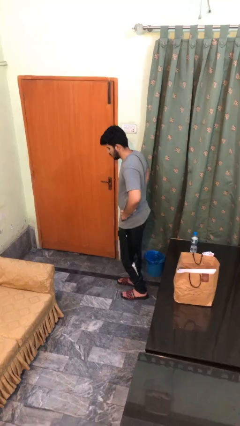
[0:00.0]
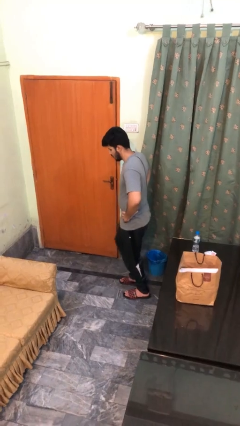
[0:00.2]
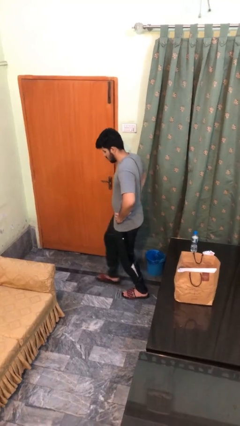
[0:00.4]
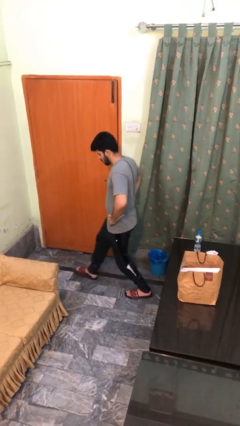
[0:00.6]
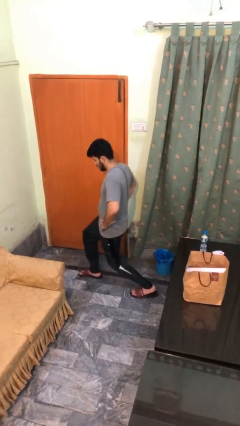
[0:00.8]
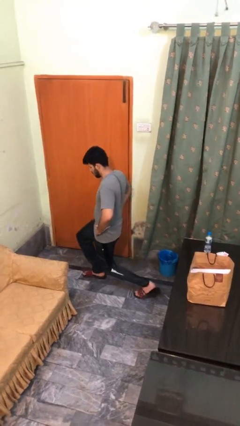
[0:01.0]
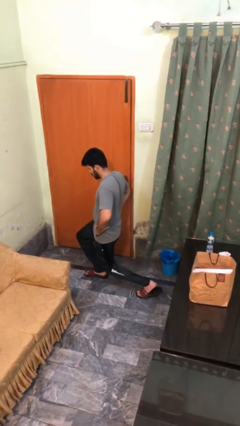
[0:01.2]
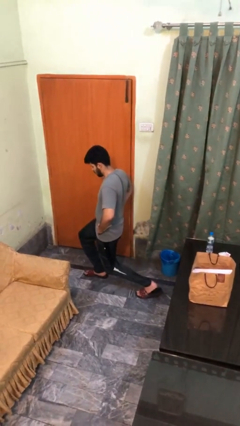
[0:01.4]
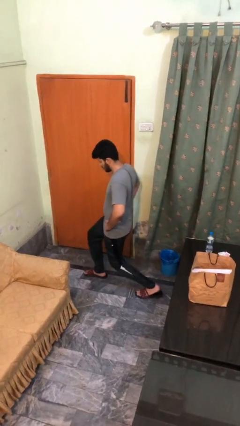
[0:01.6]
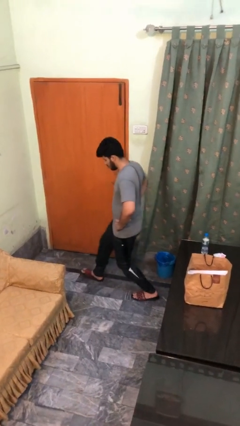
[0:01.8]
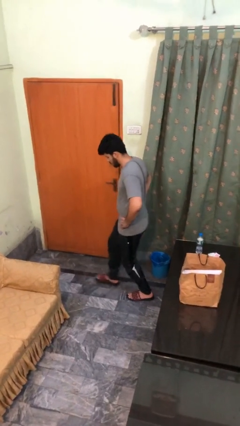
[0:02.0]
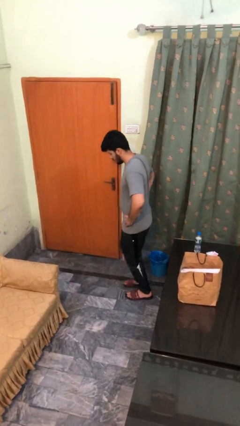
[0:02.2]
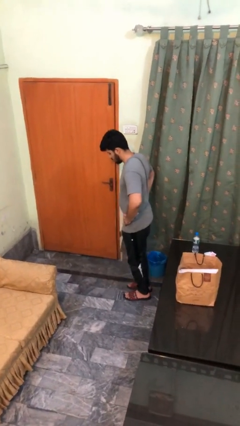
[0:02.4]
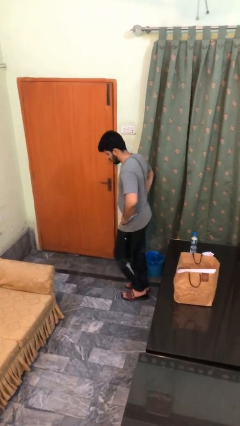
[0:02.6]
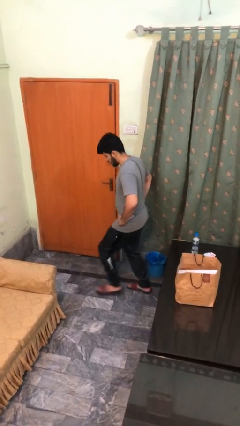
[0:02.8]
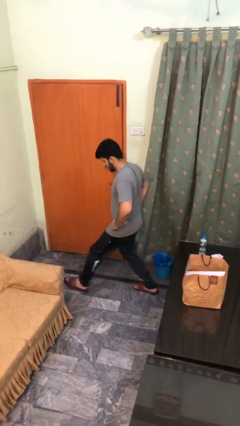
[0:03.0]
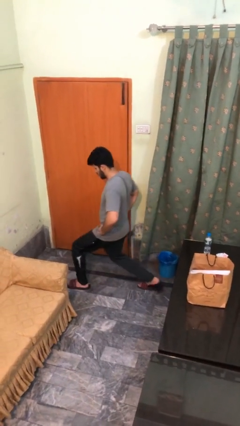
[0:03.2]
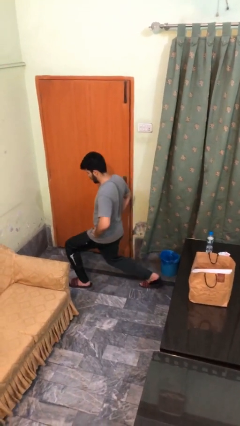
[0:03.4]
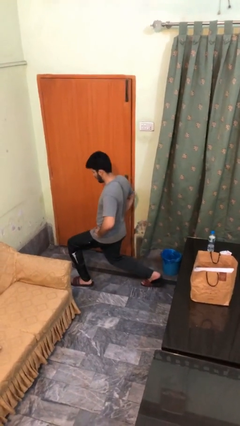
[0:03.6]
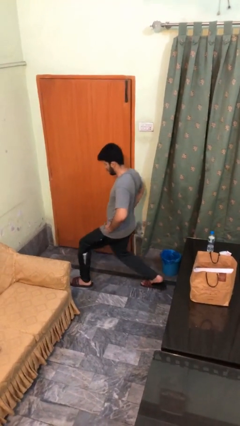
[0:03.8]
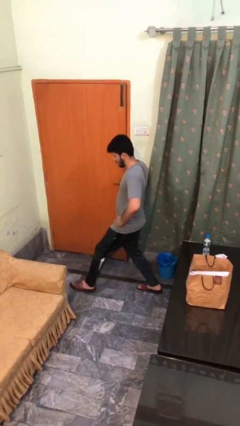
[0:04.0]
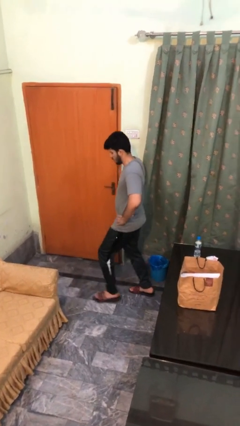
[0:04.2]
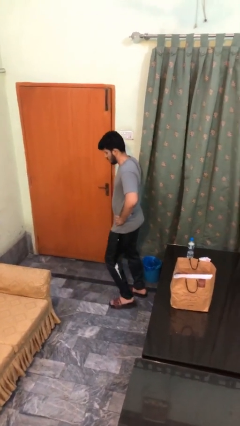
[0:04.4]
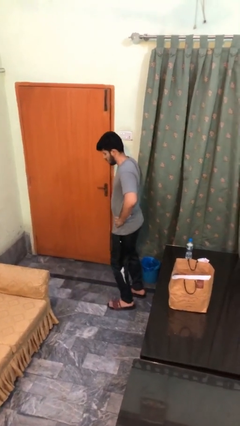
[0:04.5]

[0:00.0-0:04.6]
person exercises with lunges

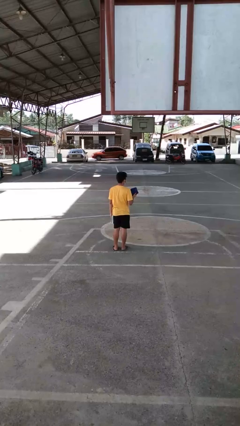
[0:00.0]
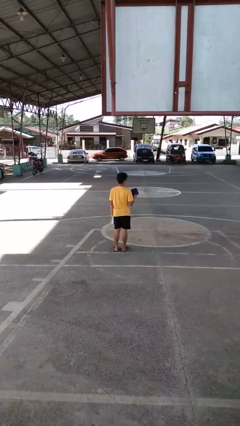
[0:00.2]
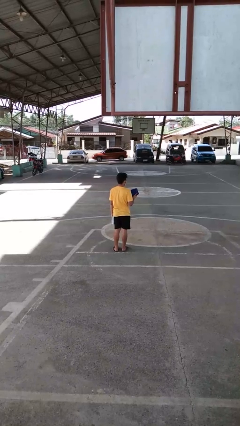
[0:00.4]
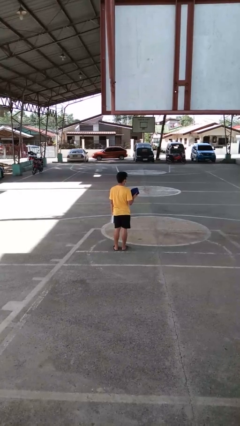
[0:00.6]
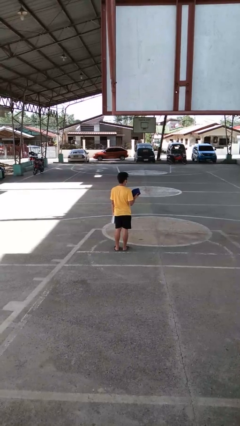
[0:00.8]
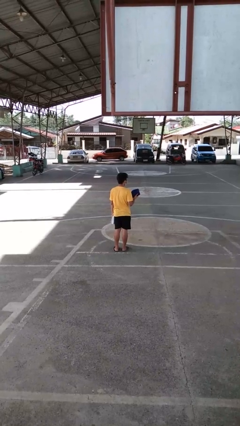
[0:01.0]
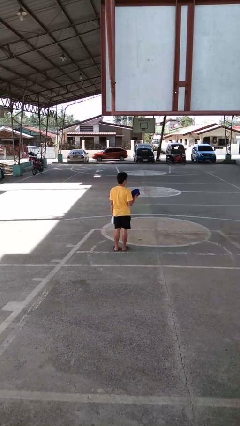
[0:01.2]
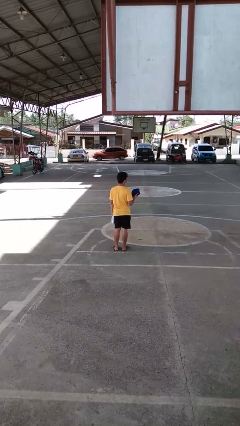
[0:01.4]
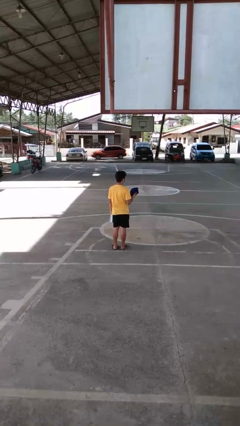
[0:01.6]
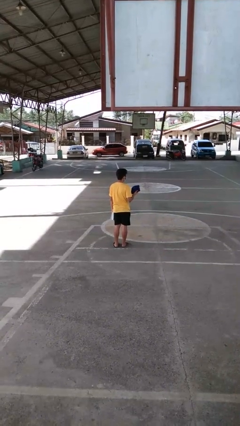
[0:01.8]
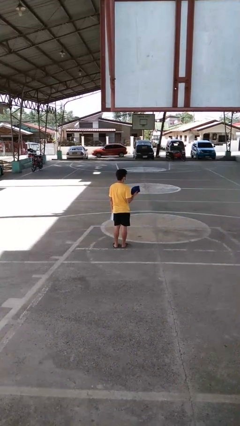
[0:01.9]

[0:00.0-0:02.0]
person takes off glasses

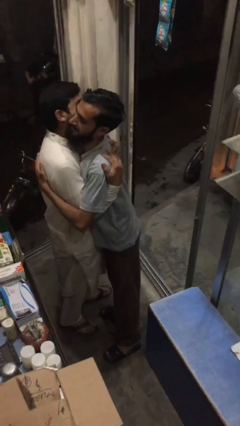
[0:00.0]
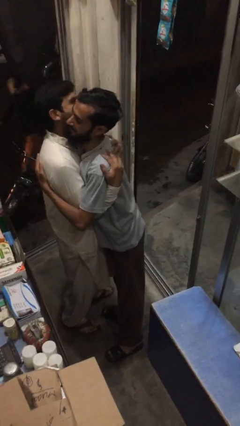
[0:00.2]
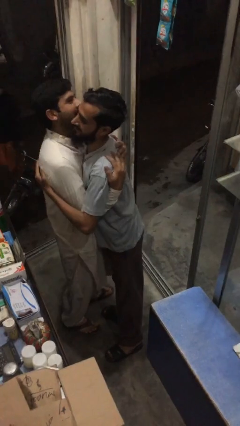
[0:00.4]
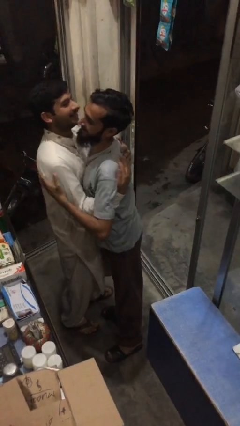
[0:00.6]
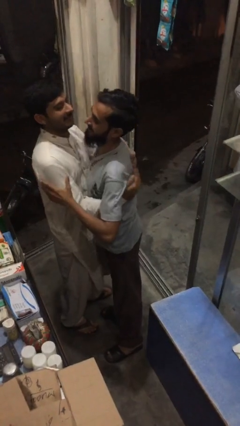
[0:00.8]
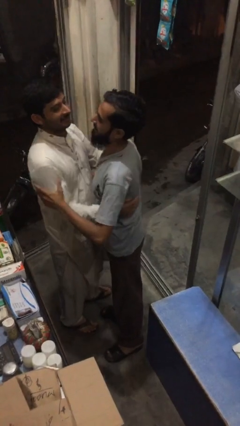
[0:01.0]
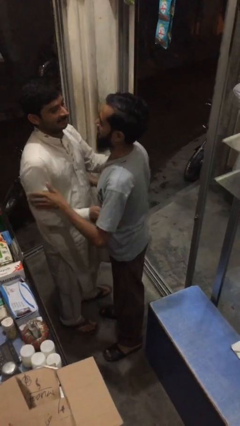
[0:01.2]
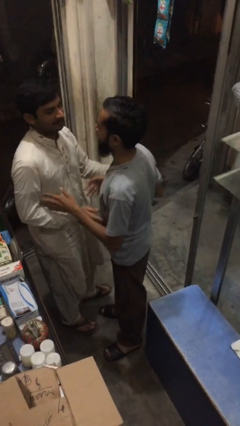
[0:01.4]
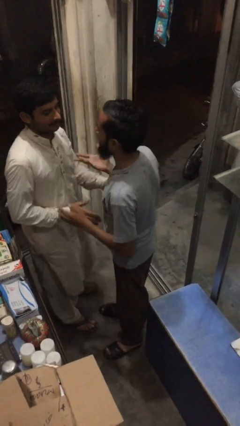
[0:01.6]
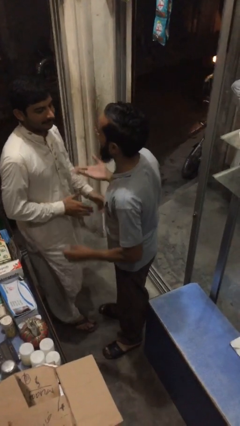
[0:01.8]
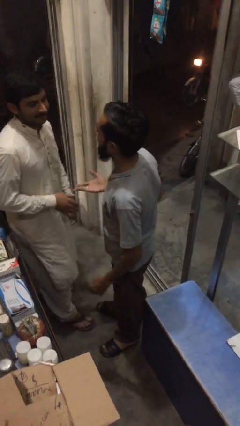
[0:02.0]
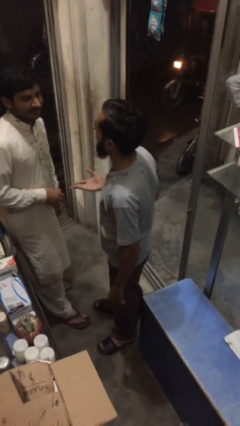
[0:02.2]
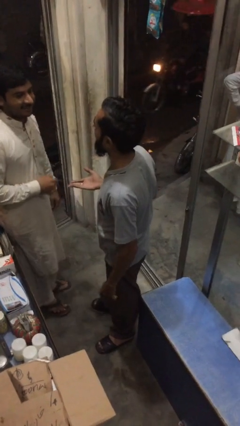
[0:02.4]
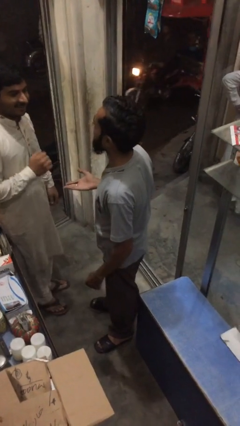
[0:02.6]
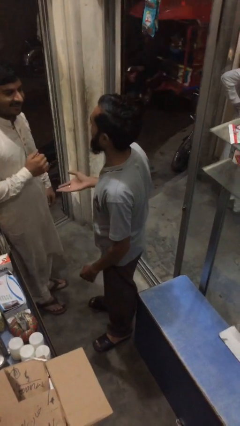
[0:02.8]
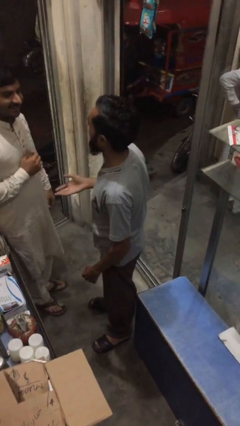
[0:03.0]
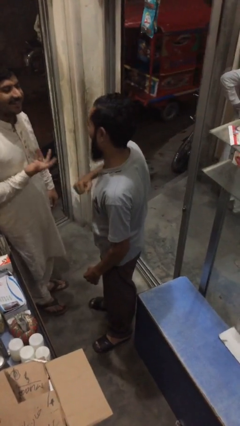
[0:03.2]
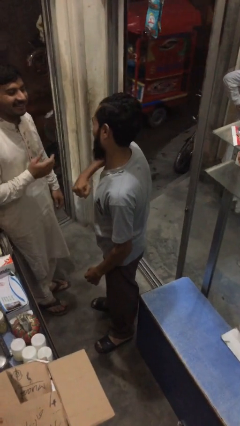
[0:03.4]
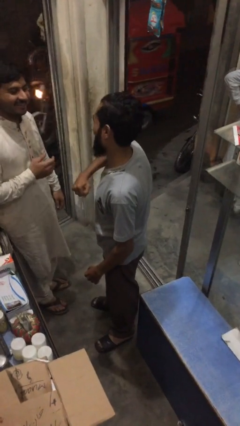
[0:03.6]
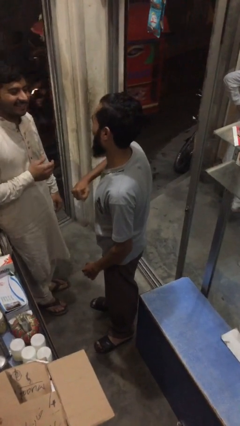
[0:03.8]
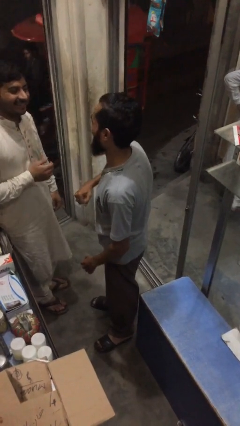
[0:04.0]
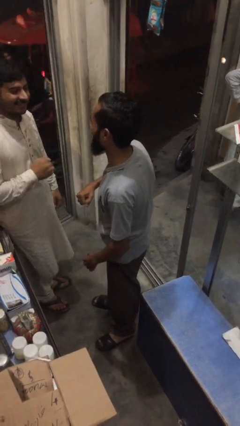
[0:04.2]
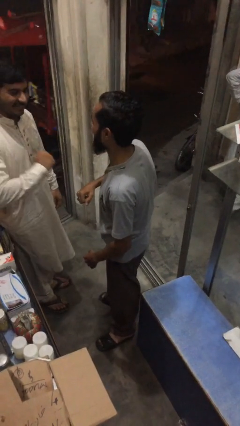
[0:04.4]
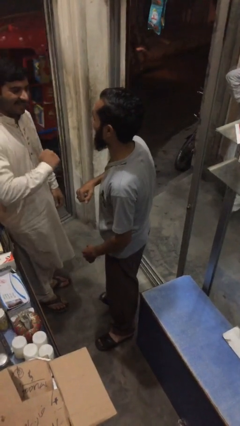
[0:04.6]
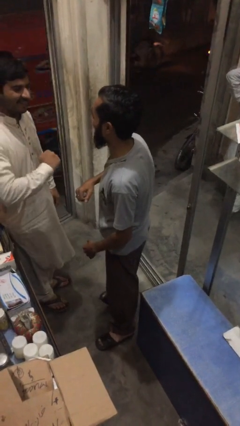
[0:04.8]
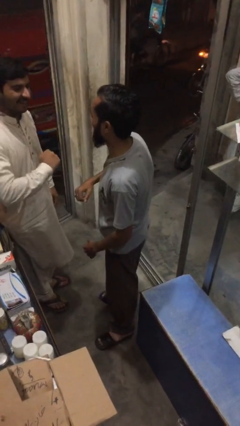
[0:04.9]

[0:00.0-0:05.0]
person talks to person

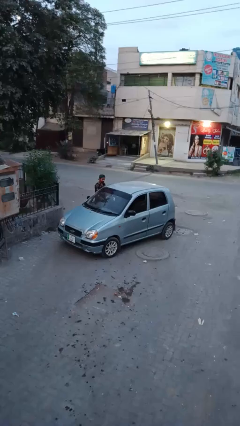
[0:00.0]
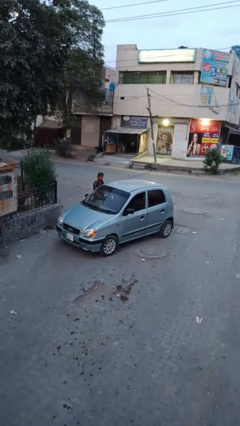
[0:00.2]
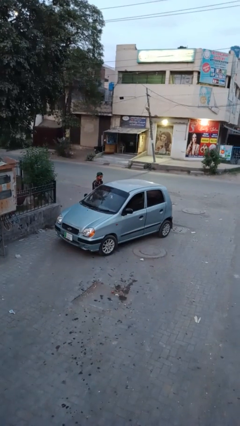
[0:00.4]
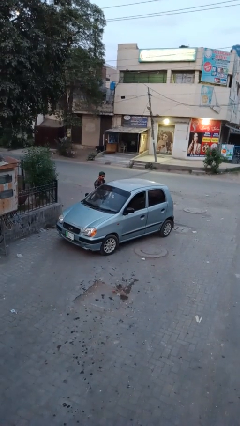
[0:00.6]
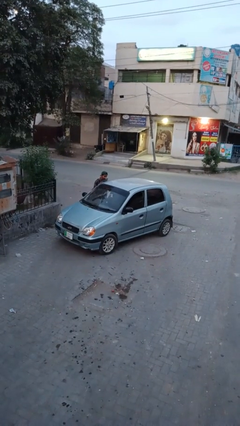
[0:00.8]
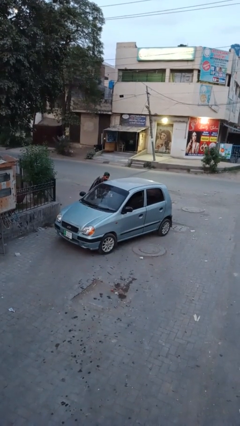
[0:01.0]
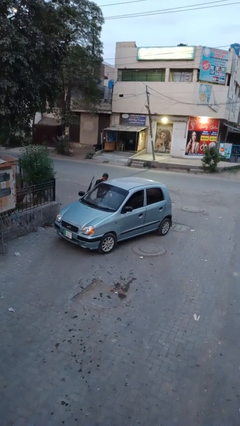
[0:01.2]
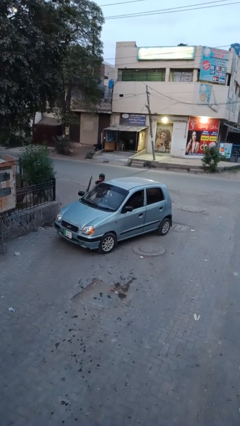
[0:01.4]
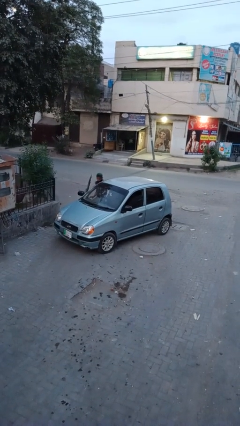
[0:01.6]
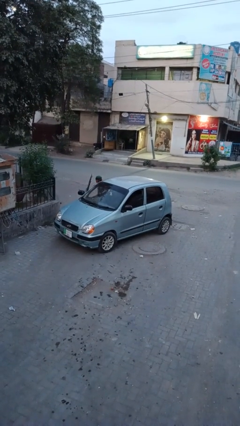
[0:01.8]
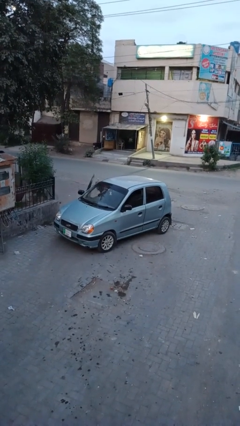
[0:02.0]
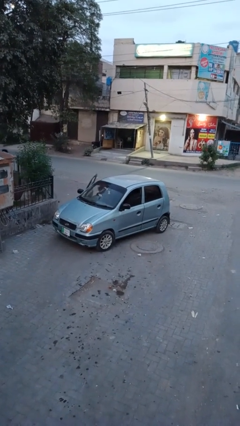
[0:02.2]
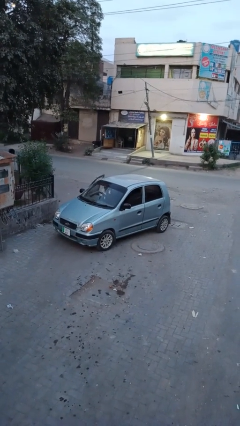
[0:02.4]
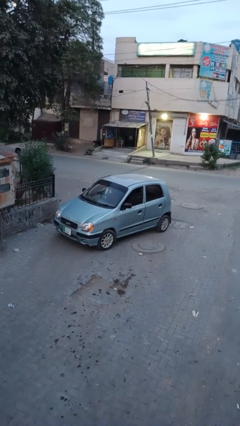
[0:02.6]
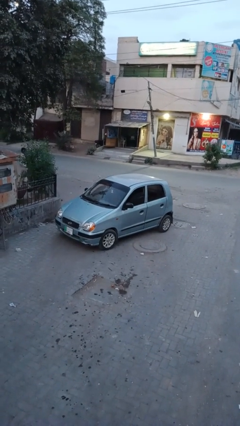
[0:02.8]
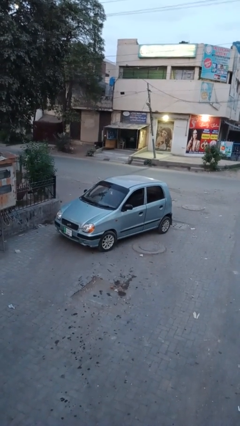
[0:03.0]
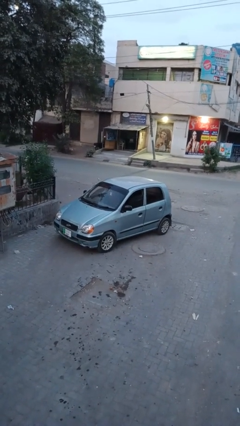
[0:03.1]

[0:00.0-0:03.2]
car picks up person

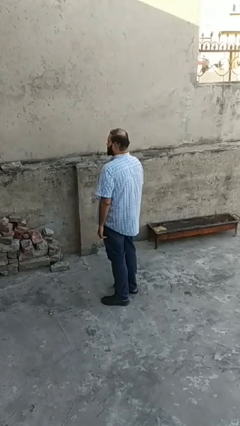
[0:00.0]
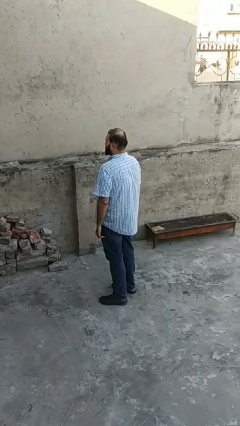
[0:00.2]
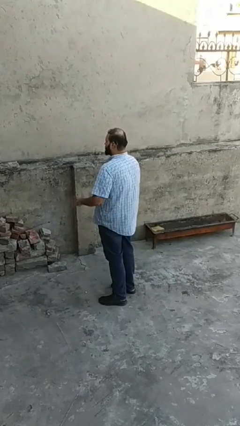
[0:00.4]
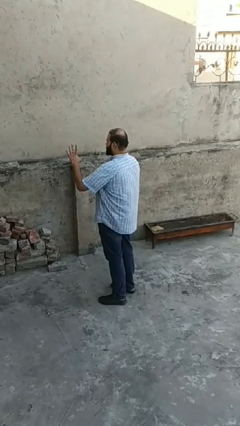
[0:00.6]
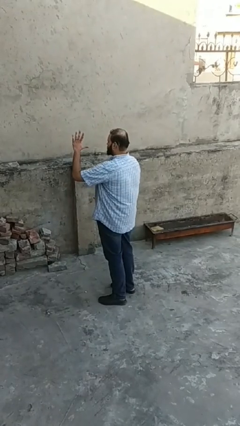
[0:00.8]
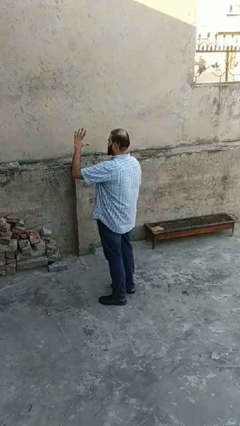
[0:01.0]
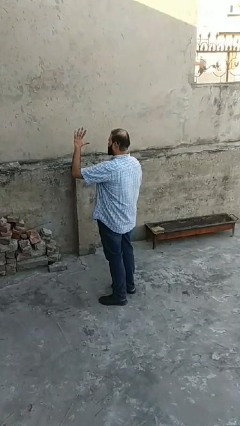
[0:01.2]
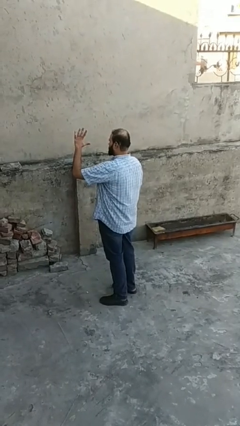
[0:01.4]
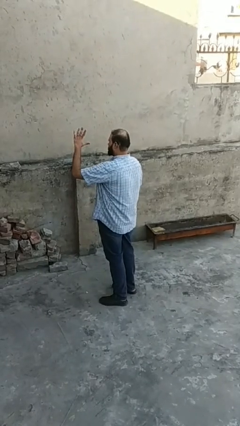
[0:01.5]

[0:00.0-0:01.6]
person gestures number five

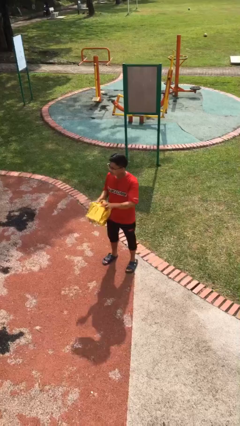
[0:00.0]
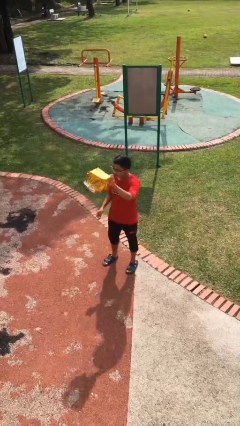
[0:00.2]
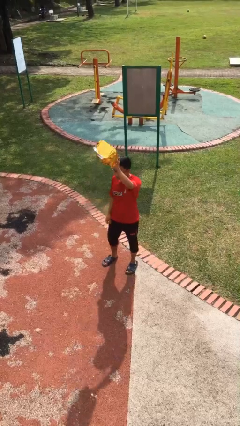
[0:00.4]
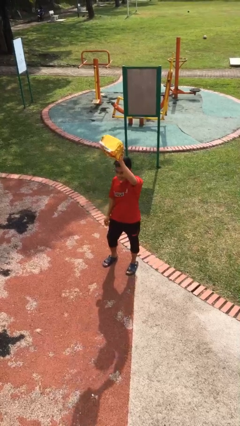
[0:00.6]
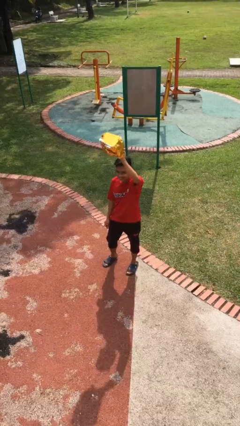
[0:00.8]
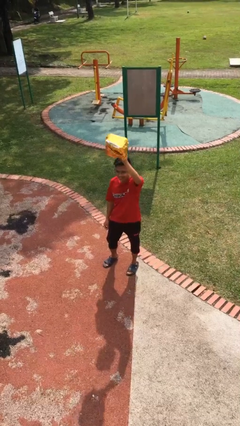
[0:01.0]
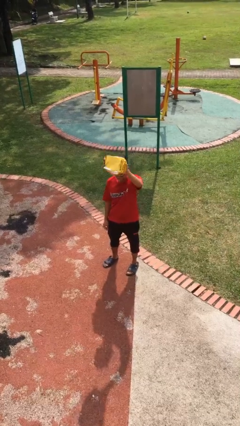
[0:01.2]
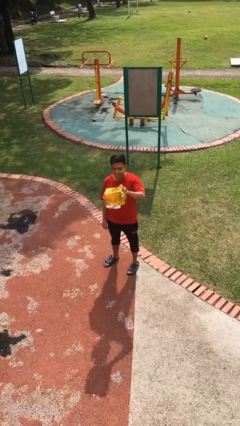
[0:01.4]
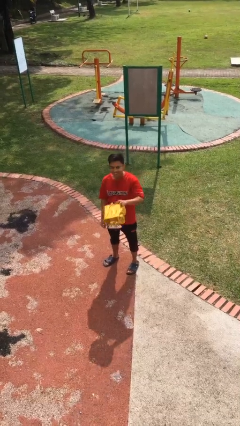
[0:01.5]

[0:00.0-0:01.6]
person holds object above head
